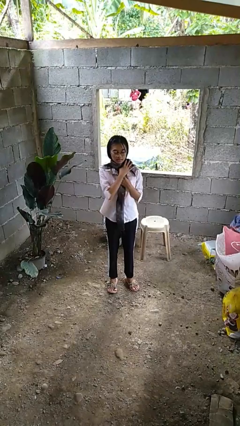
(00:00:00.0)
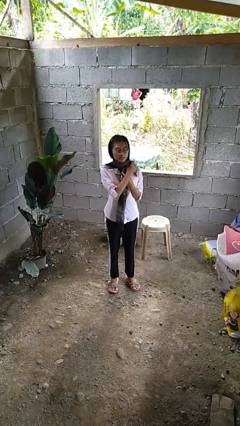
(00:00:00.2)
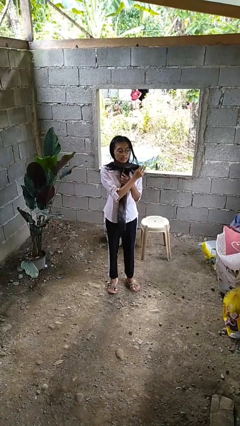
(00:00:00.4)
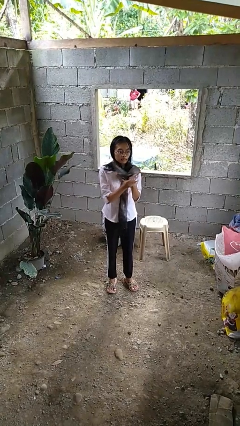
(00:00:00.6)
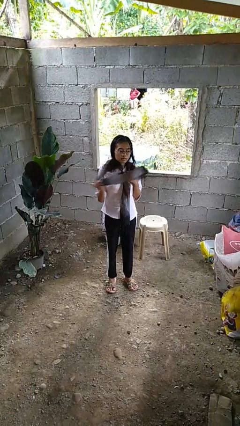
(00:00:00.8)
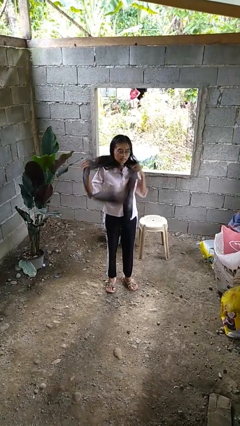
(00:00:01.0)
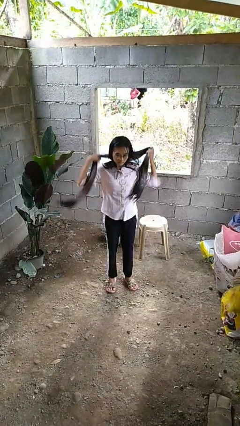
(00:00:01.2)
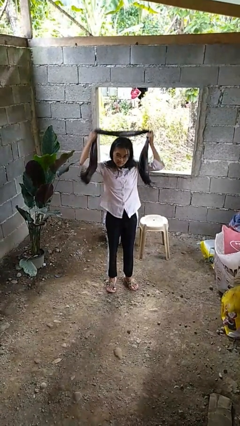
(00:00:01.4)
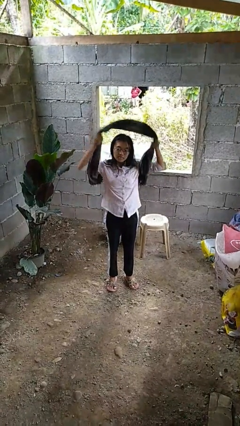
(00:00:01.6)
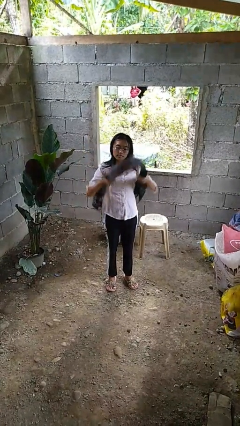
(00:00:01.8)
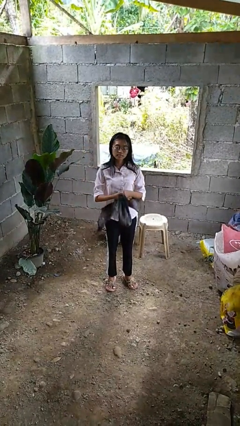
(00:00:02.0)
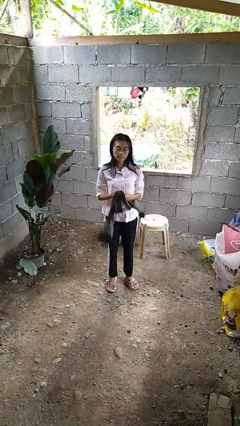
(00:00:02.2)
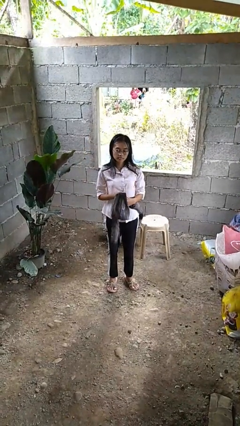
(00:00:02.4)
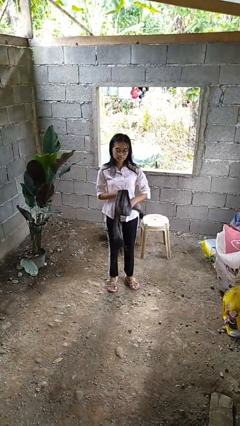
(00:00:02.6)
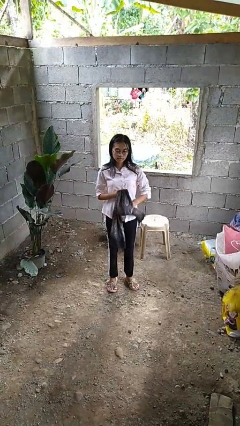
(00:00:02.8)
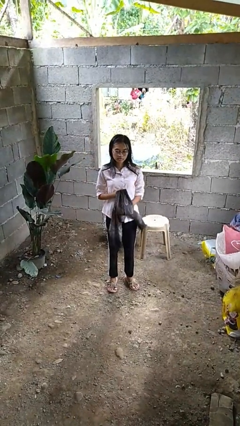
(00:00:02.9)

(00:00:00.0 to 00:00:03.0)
person takes off scarf

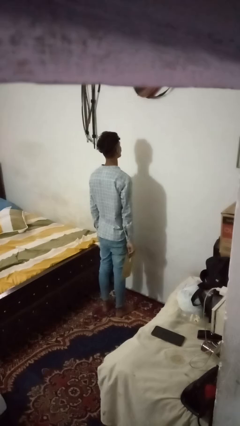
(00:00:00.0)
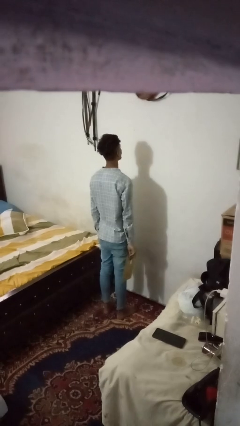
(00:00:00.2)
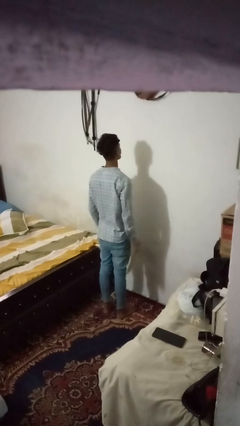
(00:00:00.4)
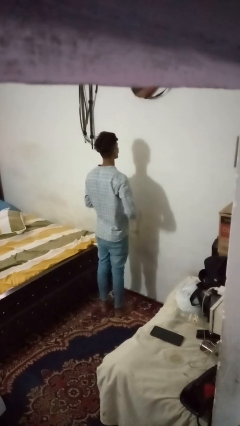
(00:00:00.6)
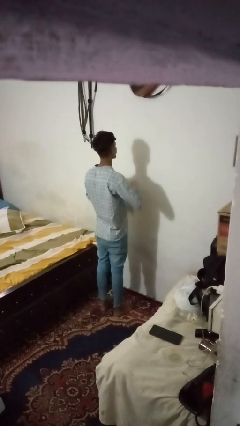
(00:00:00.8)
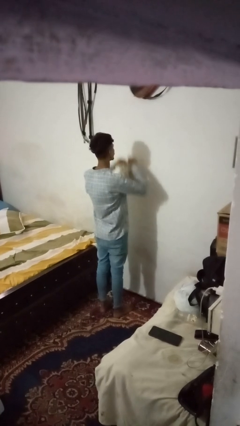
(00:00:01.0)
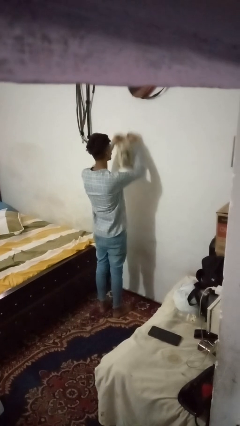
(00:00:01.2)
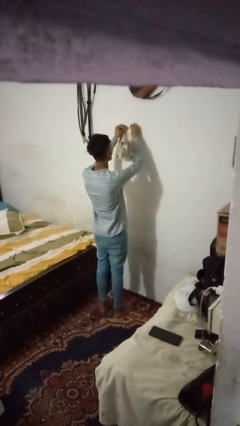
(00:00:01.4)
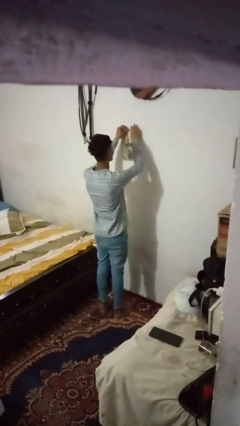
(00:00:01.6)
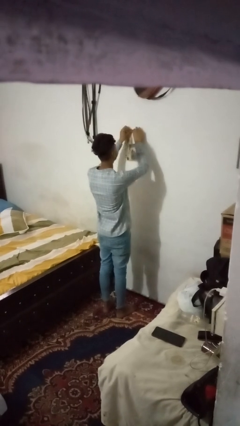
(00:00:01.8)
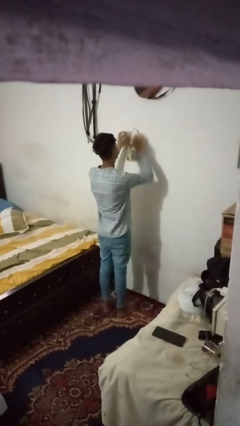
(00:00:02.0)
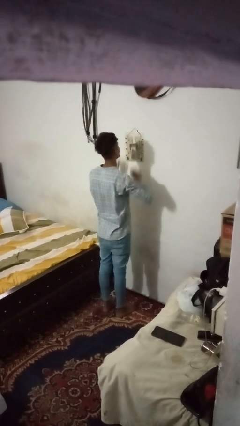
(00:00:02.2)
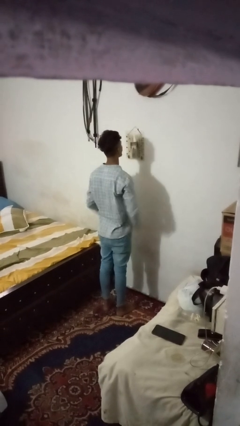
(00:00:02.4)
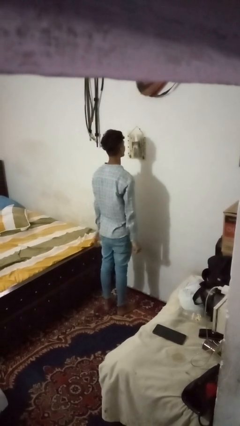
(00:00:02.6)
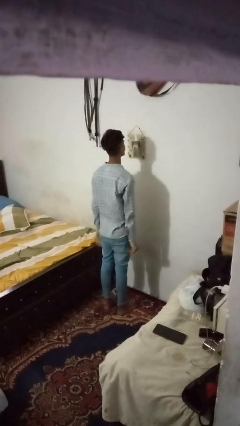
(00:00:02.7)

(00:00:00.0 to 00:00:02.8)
person puts up picture frame

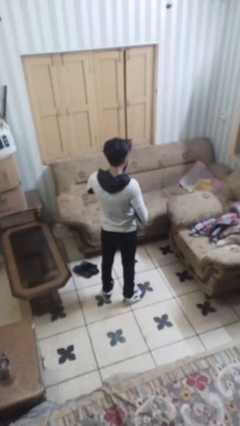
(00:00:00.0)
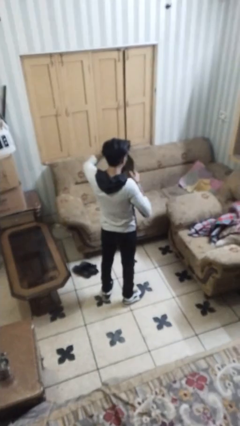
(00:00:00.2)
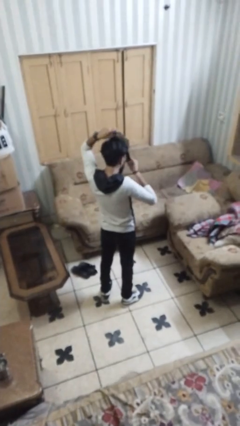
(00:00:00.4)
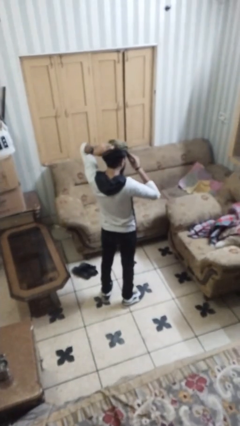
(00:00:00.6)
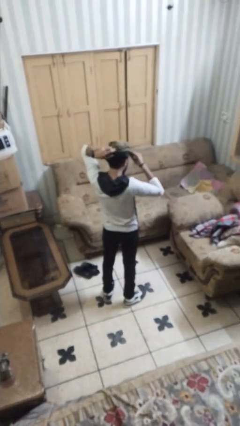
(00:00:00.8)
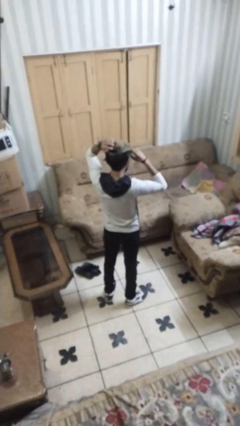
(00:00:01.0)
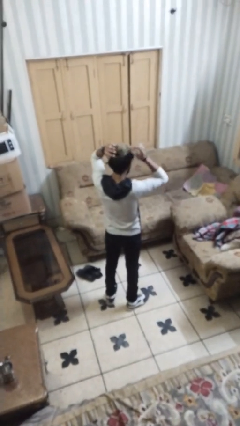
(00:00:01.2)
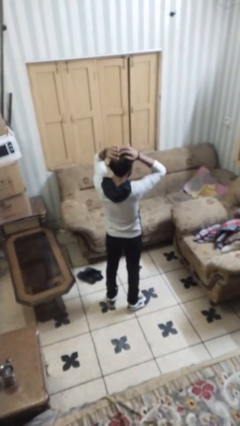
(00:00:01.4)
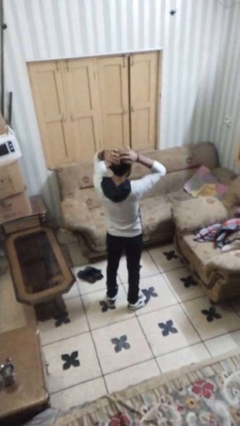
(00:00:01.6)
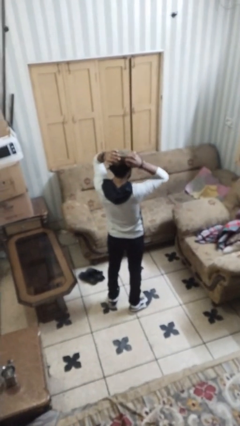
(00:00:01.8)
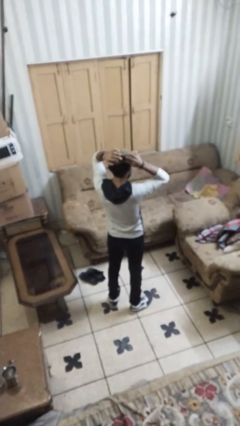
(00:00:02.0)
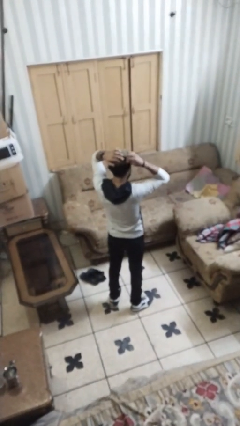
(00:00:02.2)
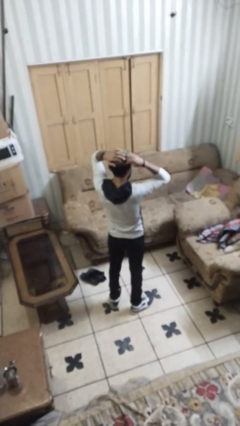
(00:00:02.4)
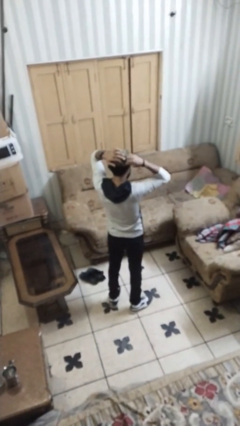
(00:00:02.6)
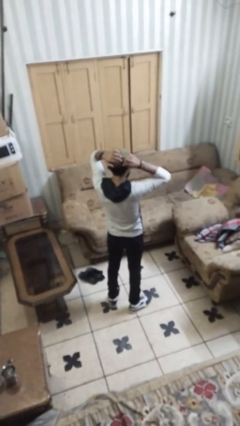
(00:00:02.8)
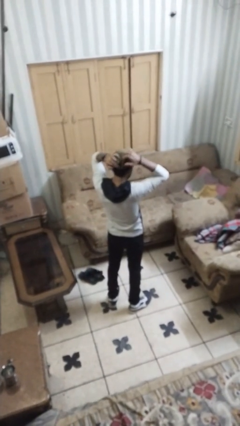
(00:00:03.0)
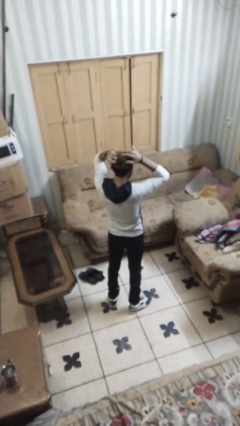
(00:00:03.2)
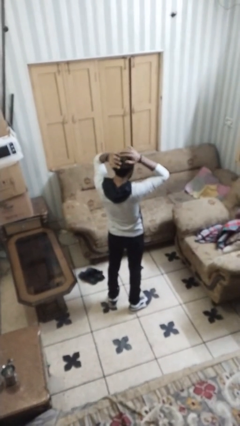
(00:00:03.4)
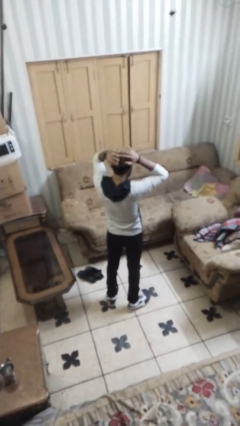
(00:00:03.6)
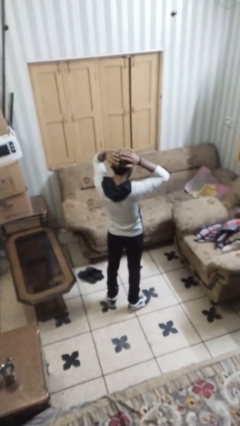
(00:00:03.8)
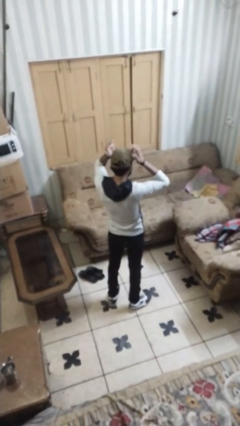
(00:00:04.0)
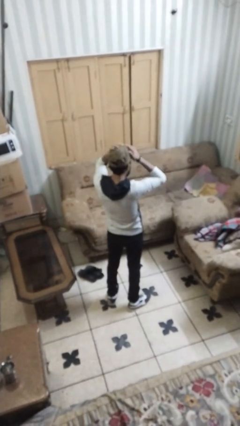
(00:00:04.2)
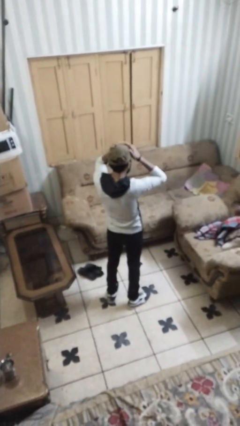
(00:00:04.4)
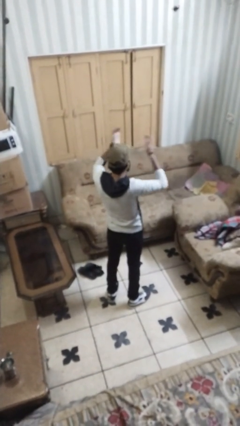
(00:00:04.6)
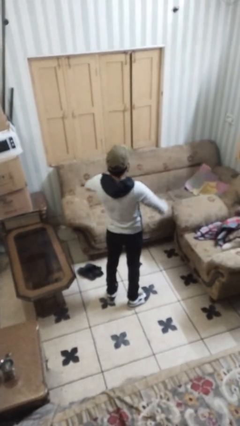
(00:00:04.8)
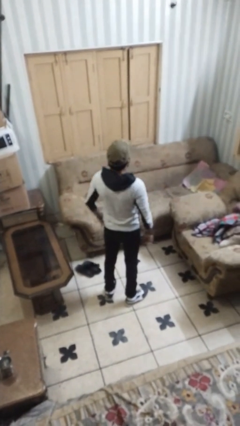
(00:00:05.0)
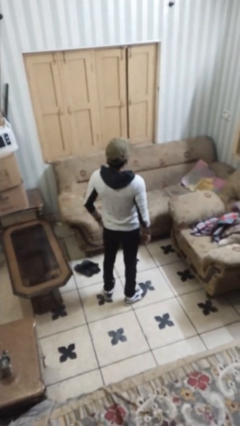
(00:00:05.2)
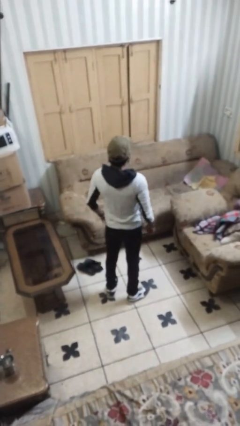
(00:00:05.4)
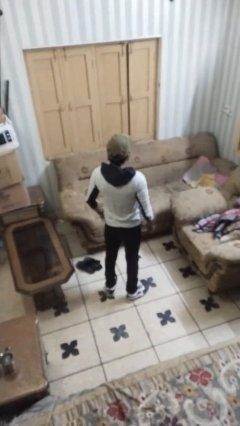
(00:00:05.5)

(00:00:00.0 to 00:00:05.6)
person puts on hat

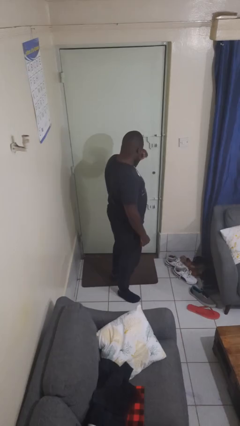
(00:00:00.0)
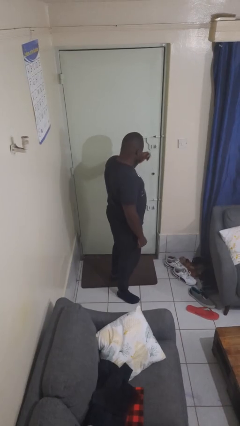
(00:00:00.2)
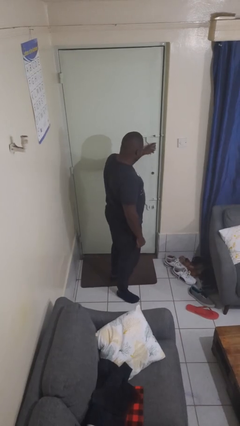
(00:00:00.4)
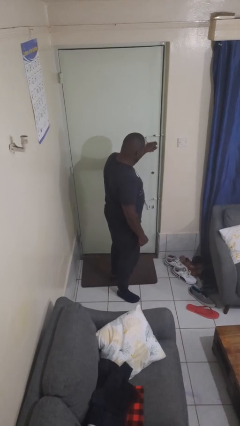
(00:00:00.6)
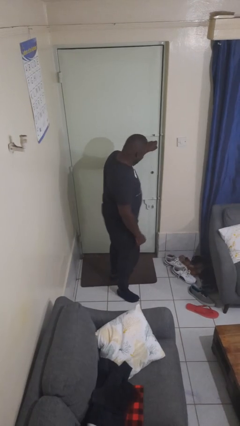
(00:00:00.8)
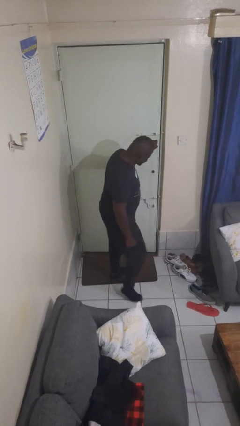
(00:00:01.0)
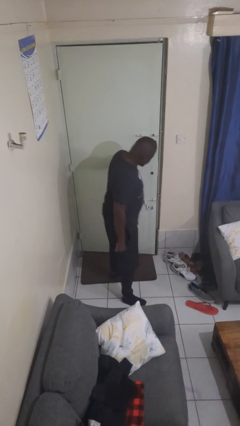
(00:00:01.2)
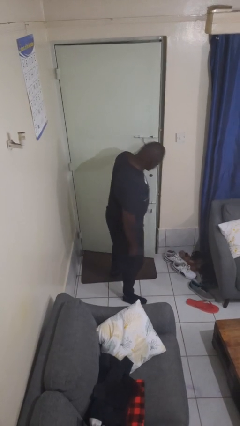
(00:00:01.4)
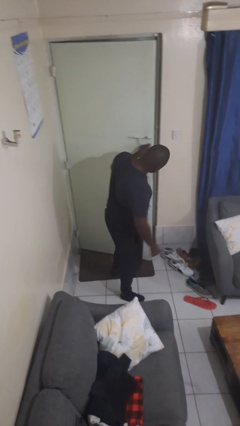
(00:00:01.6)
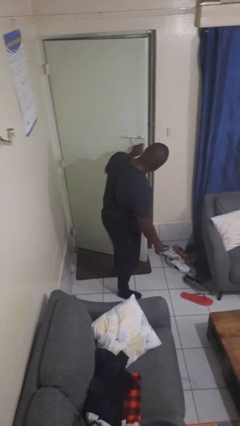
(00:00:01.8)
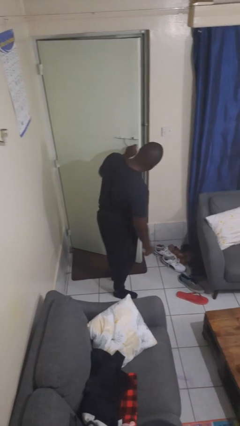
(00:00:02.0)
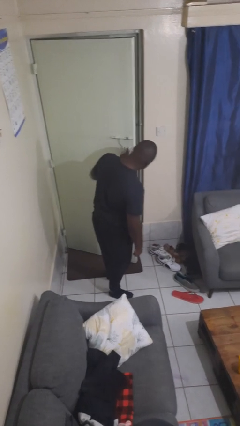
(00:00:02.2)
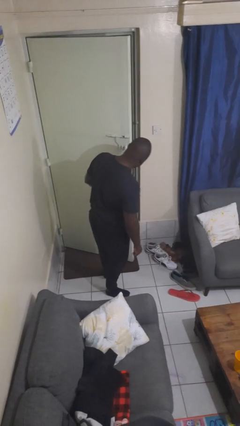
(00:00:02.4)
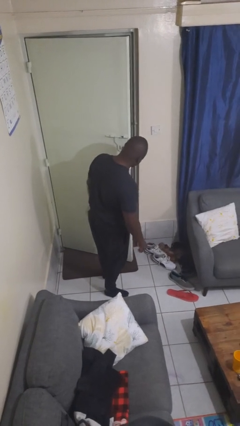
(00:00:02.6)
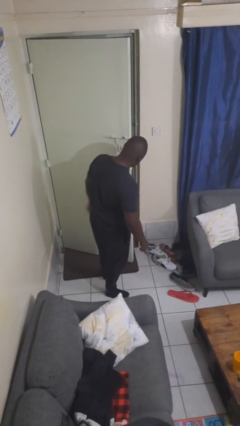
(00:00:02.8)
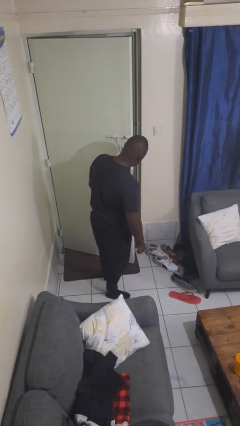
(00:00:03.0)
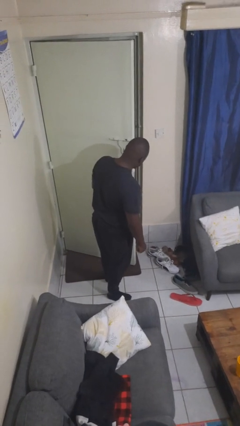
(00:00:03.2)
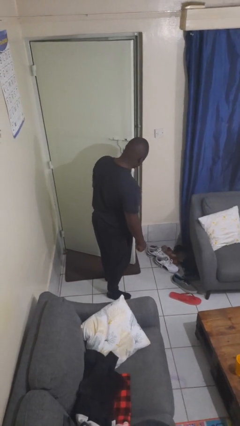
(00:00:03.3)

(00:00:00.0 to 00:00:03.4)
person opens facility door

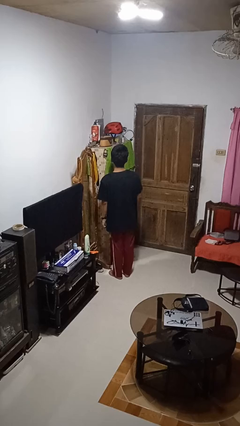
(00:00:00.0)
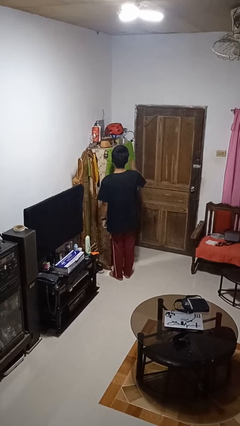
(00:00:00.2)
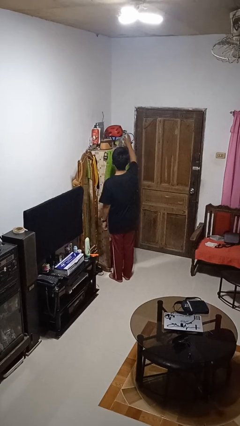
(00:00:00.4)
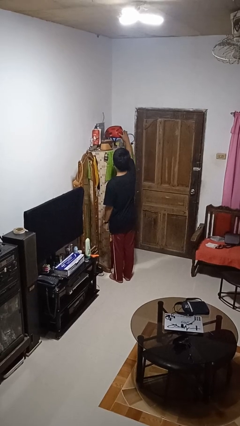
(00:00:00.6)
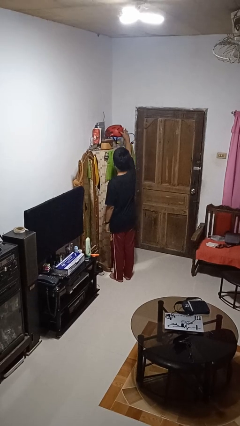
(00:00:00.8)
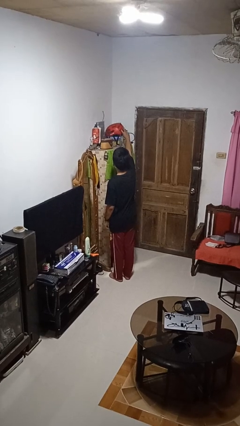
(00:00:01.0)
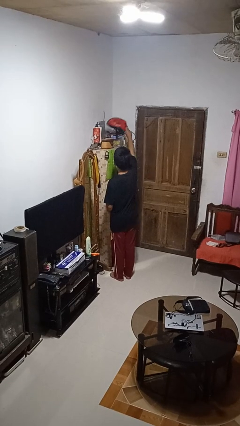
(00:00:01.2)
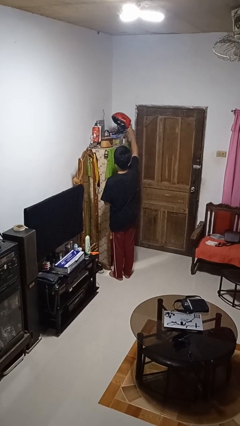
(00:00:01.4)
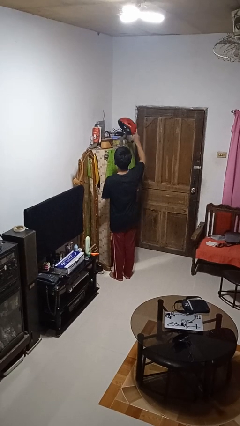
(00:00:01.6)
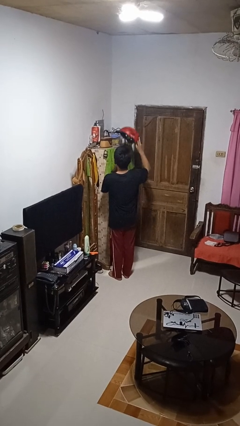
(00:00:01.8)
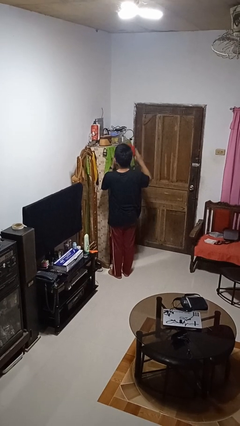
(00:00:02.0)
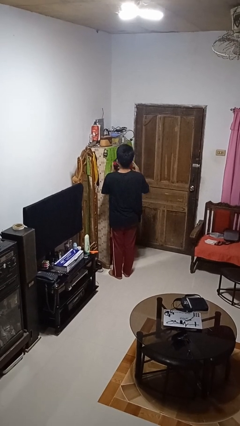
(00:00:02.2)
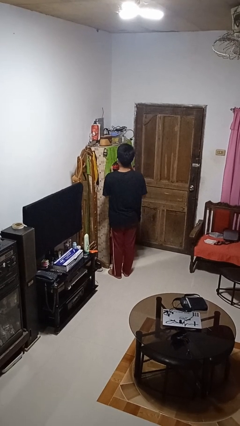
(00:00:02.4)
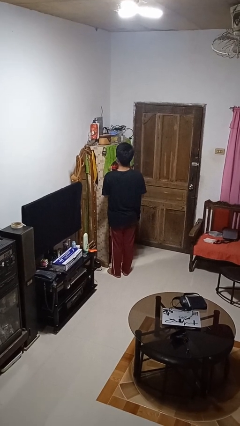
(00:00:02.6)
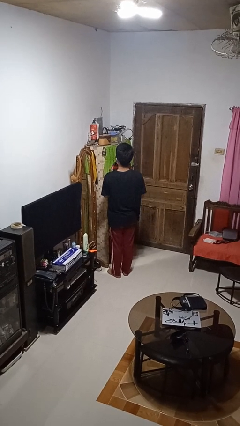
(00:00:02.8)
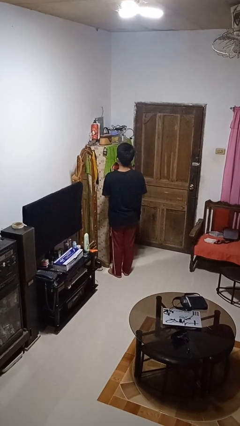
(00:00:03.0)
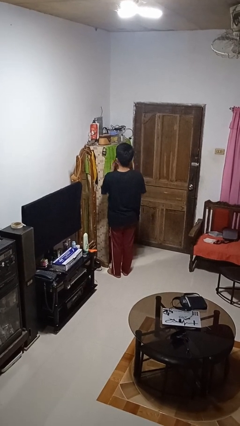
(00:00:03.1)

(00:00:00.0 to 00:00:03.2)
person picks up object from shelf
